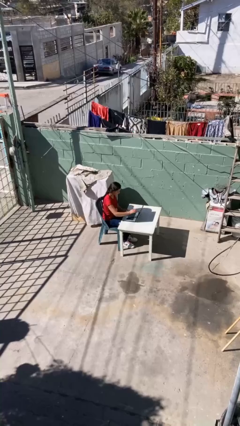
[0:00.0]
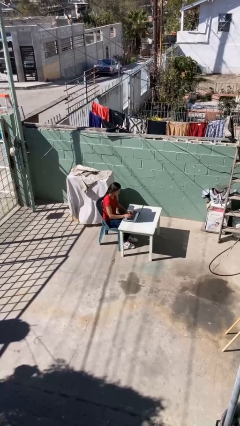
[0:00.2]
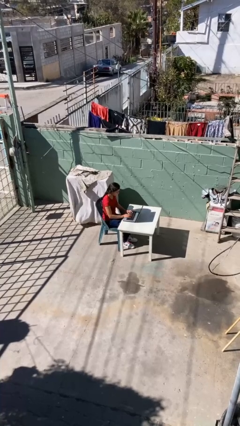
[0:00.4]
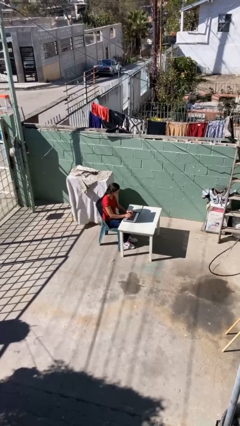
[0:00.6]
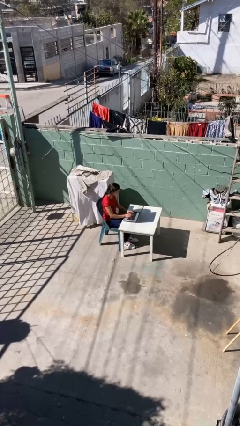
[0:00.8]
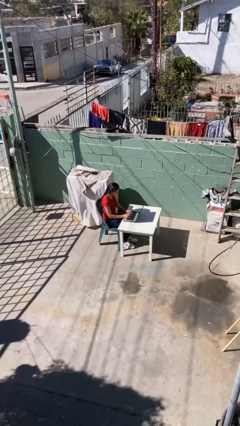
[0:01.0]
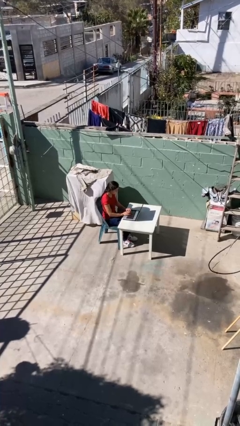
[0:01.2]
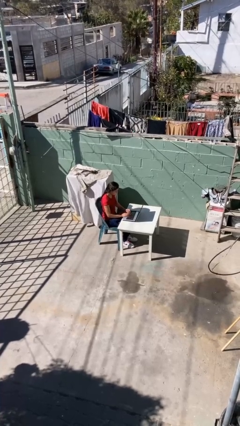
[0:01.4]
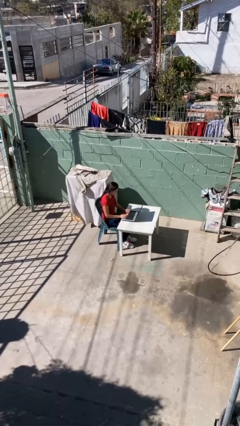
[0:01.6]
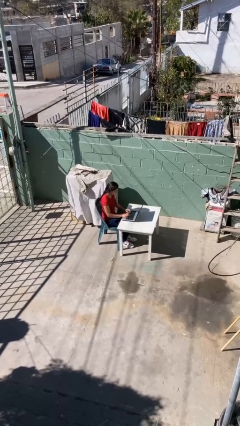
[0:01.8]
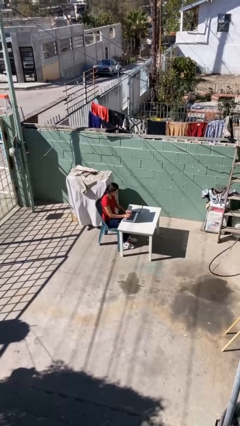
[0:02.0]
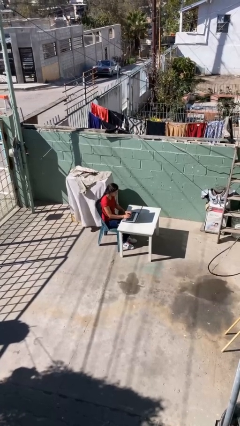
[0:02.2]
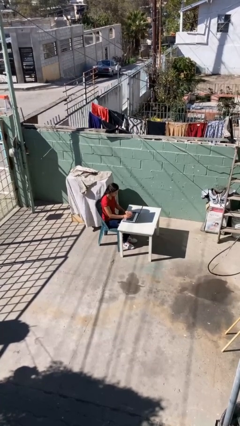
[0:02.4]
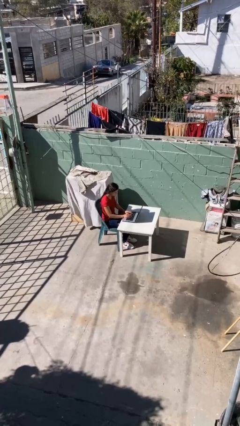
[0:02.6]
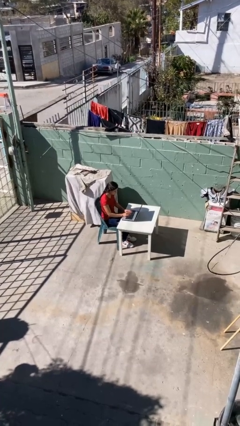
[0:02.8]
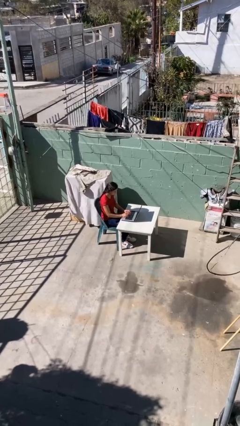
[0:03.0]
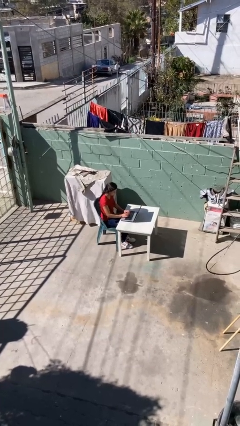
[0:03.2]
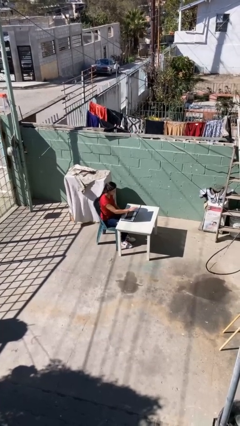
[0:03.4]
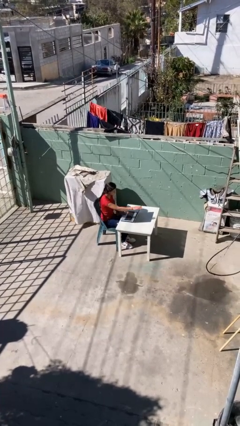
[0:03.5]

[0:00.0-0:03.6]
person interacts with laptop

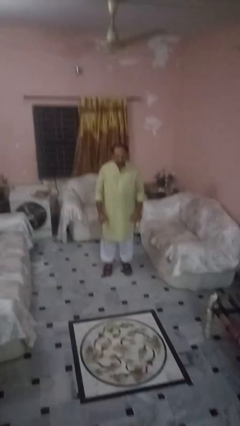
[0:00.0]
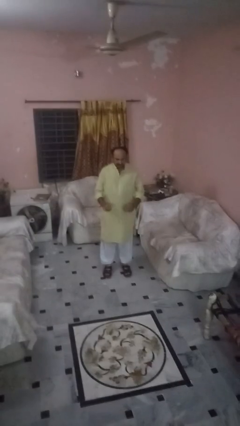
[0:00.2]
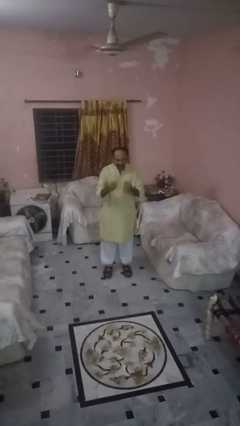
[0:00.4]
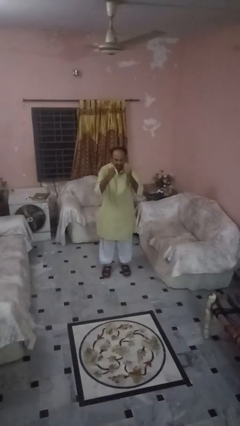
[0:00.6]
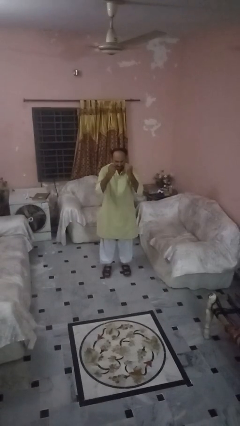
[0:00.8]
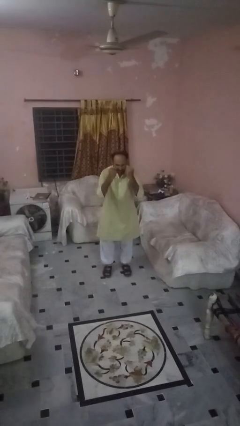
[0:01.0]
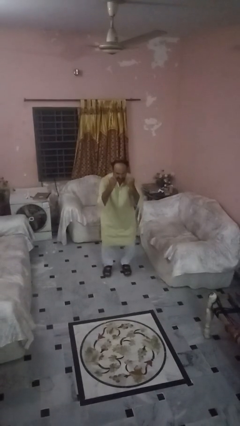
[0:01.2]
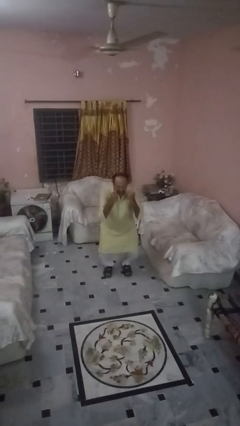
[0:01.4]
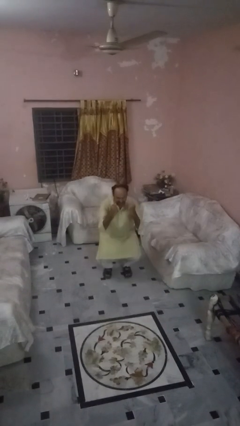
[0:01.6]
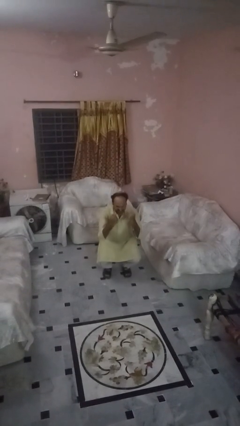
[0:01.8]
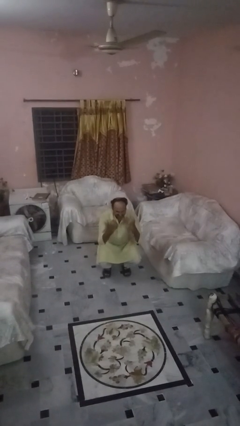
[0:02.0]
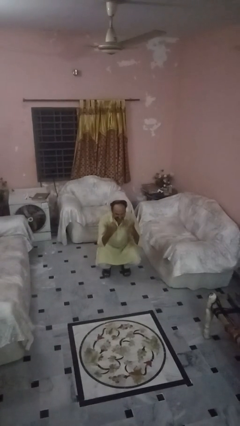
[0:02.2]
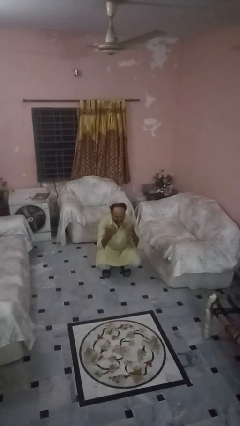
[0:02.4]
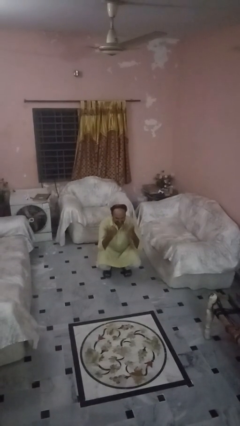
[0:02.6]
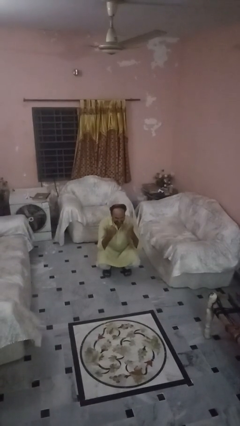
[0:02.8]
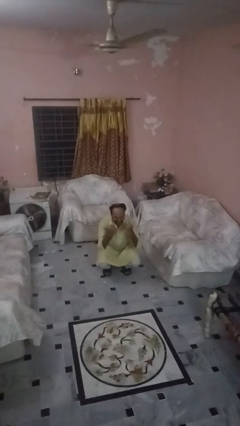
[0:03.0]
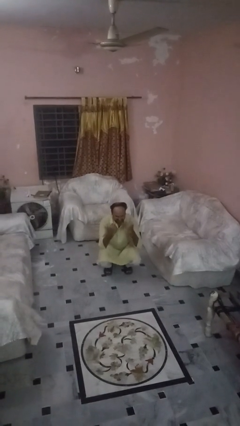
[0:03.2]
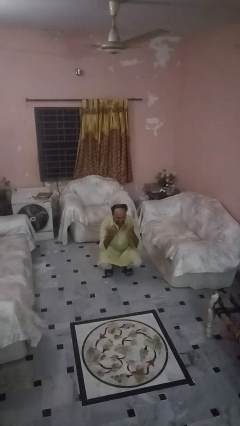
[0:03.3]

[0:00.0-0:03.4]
person squats

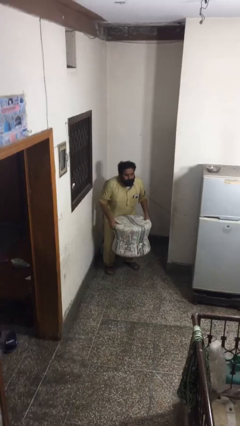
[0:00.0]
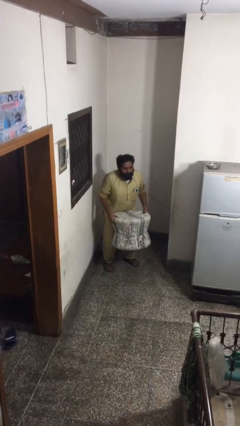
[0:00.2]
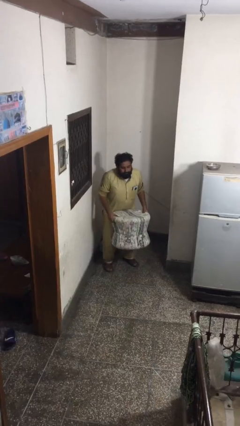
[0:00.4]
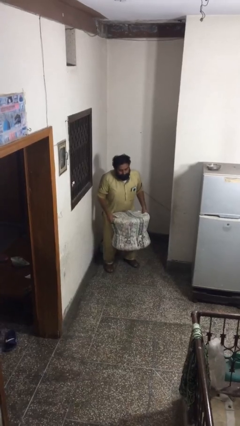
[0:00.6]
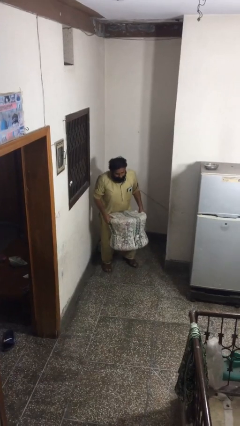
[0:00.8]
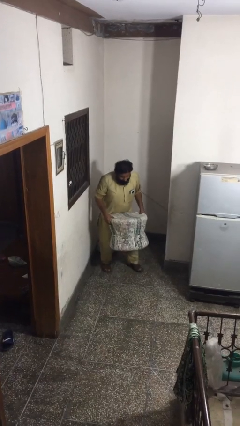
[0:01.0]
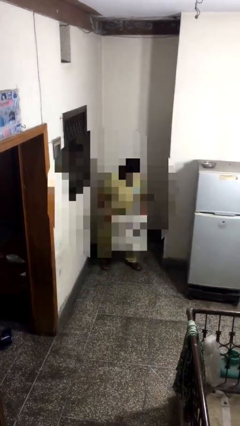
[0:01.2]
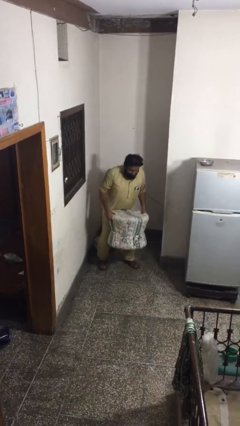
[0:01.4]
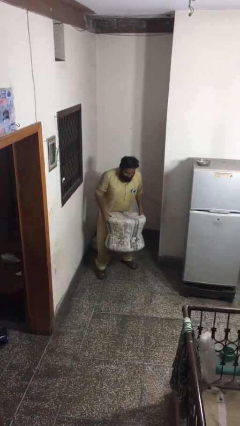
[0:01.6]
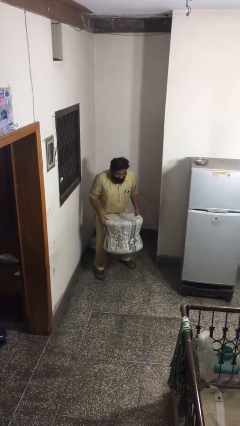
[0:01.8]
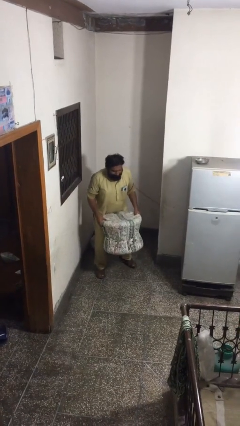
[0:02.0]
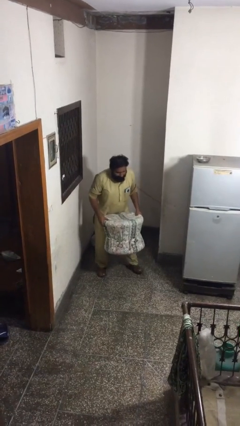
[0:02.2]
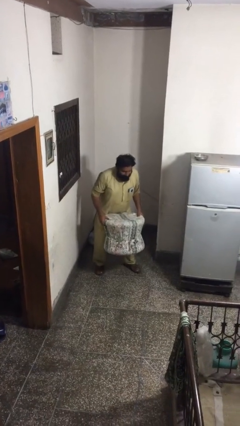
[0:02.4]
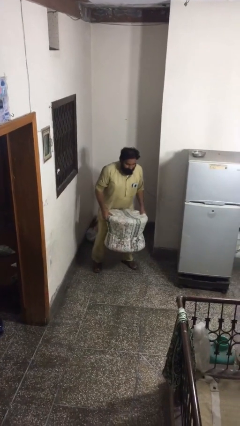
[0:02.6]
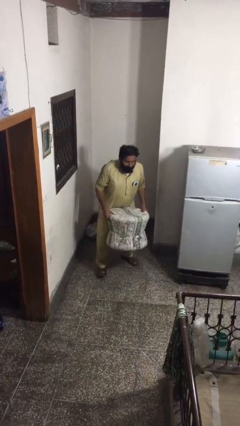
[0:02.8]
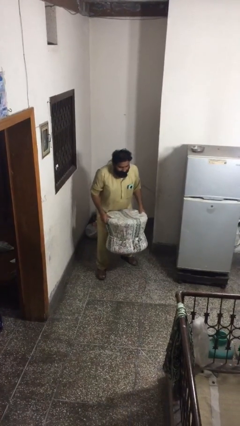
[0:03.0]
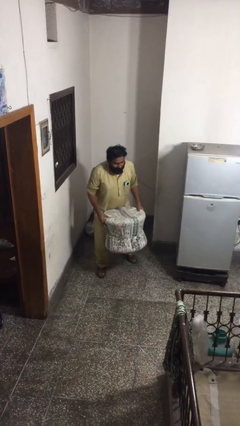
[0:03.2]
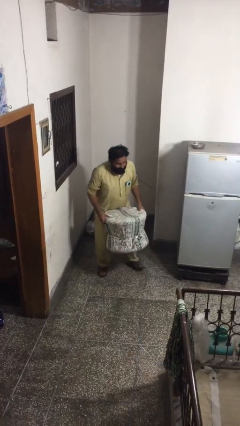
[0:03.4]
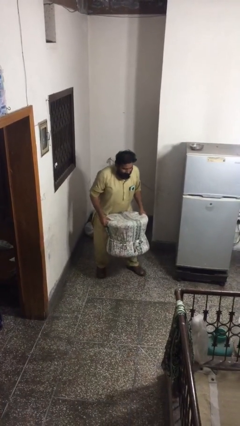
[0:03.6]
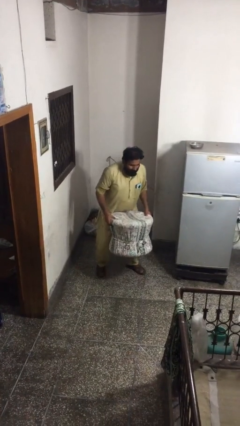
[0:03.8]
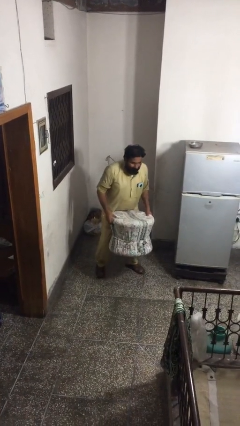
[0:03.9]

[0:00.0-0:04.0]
person carries heavy object

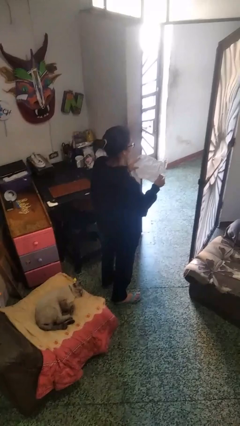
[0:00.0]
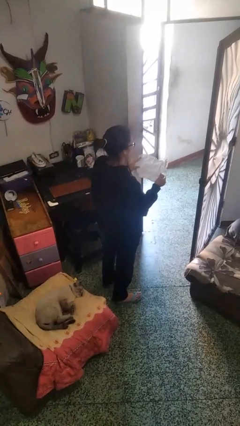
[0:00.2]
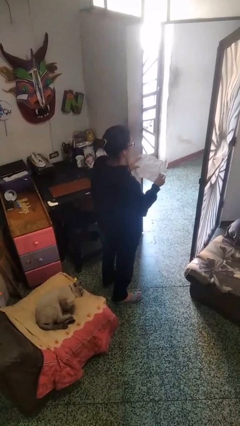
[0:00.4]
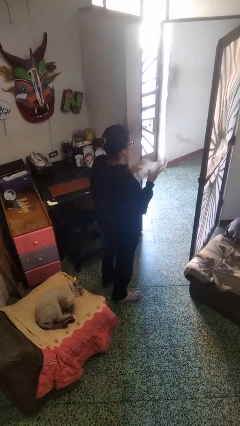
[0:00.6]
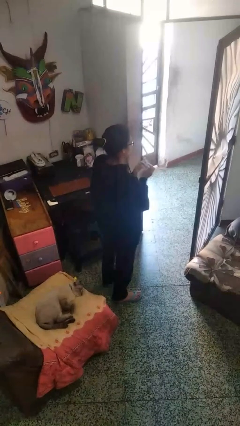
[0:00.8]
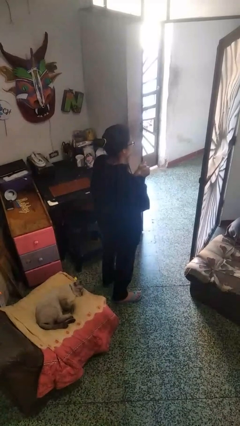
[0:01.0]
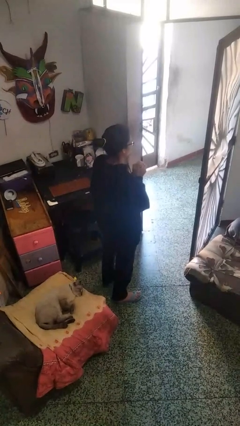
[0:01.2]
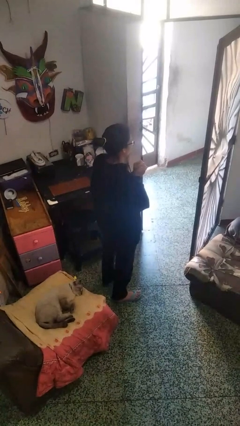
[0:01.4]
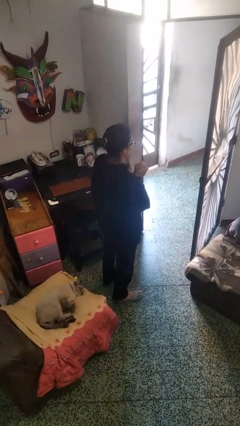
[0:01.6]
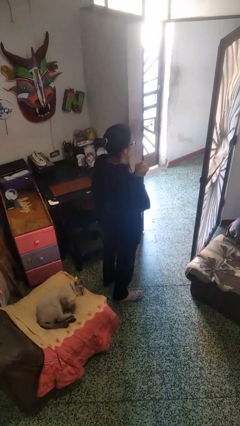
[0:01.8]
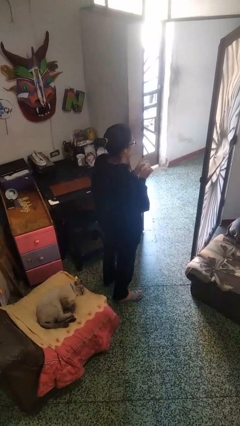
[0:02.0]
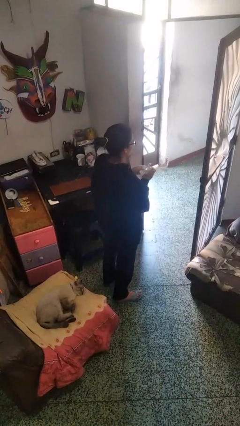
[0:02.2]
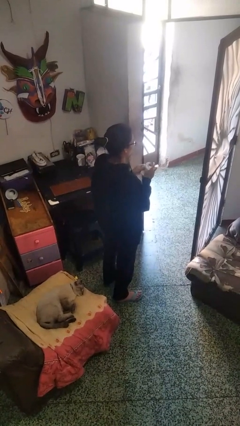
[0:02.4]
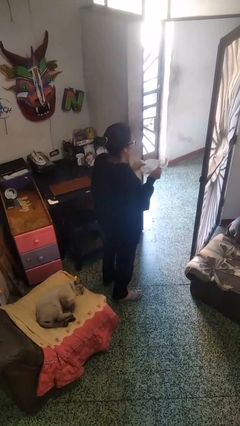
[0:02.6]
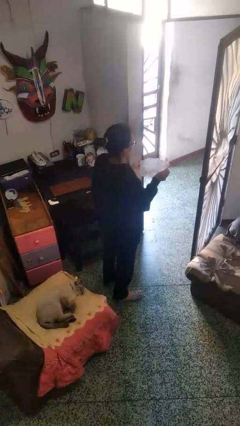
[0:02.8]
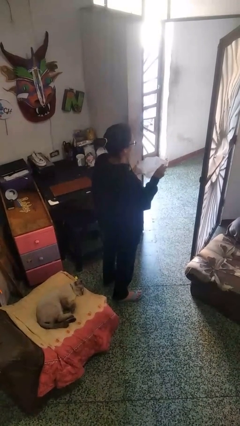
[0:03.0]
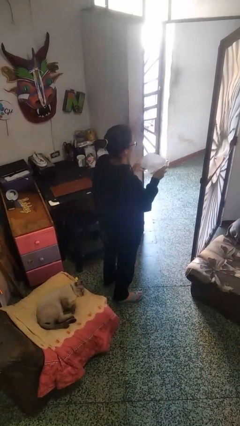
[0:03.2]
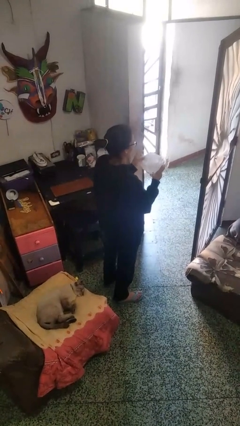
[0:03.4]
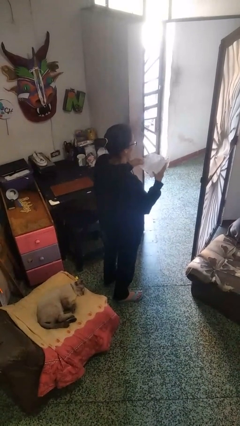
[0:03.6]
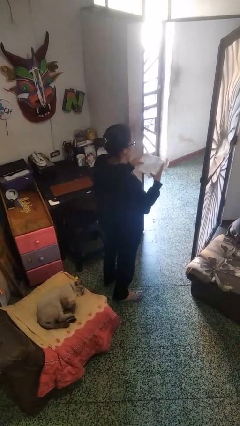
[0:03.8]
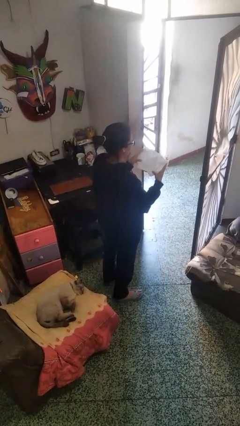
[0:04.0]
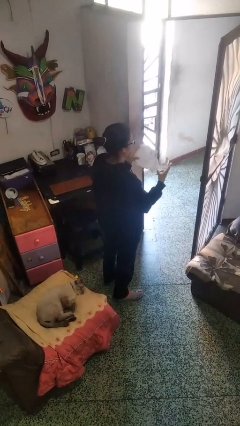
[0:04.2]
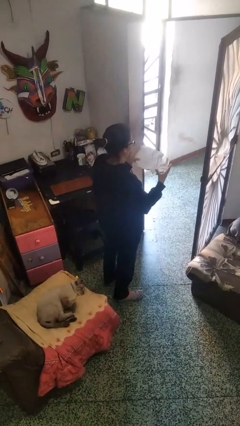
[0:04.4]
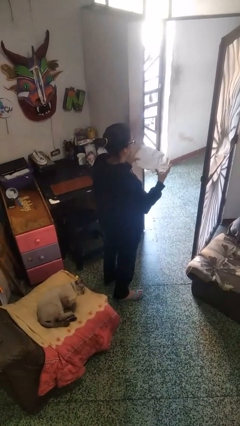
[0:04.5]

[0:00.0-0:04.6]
person crumples paper

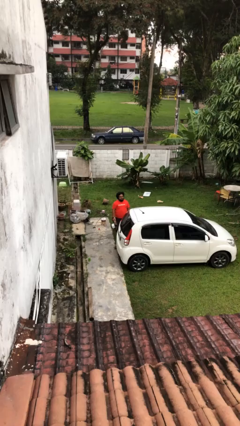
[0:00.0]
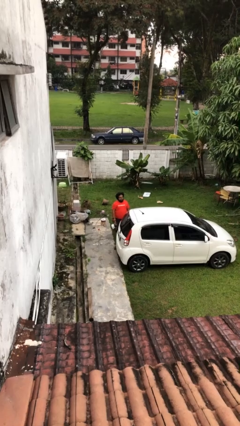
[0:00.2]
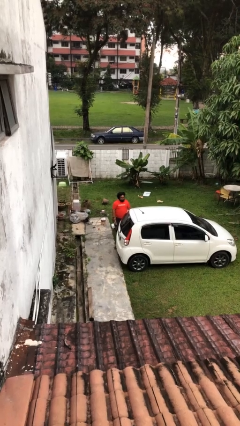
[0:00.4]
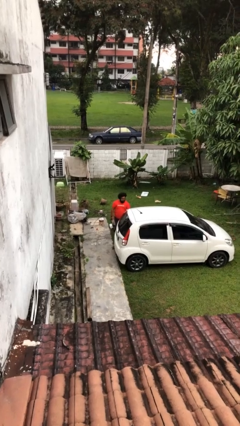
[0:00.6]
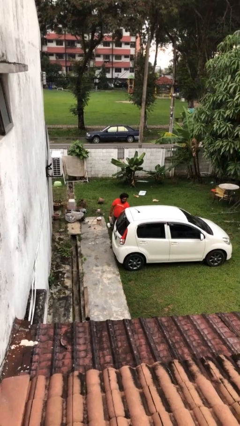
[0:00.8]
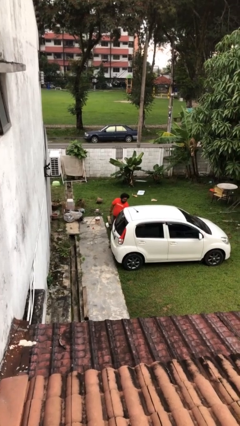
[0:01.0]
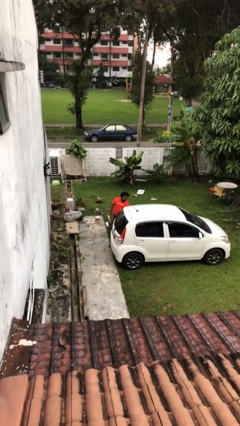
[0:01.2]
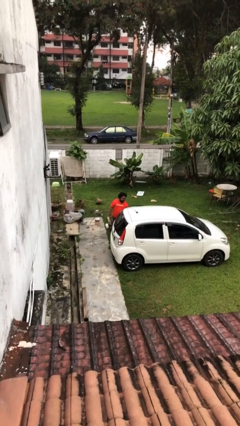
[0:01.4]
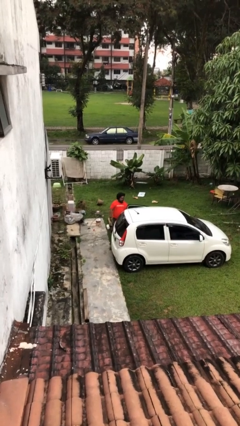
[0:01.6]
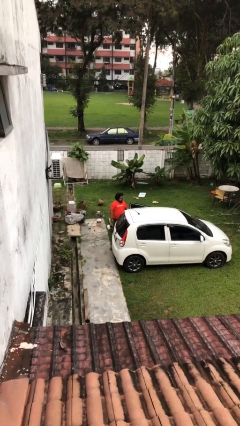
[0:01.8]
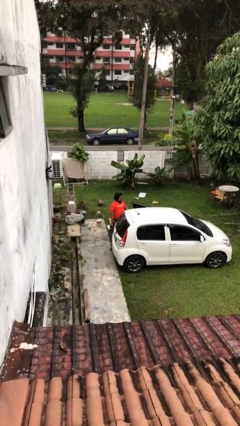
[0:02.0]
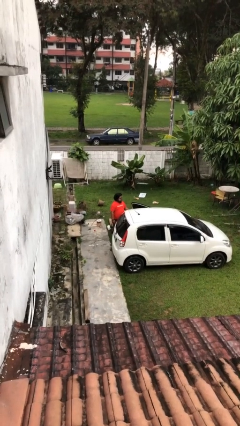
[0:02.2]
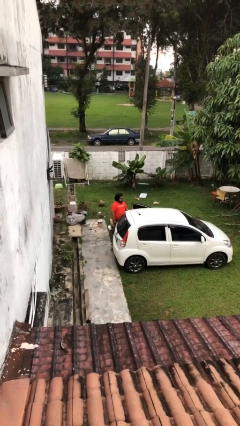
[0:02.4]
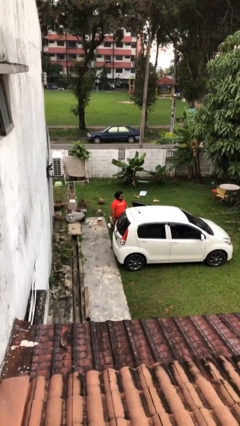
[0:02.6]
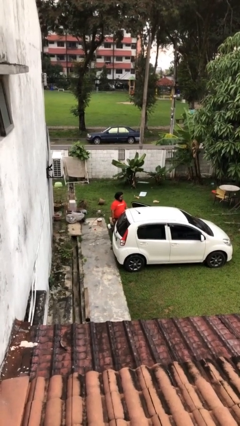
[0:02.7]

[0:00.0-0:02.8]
person opens car door
